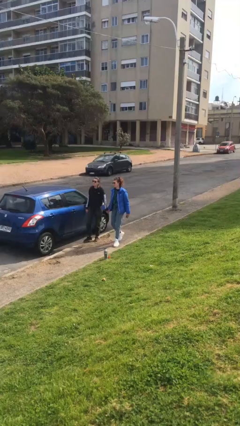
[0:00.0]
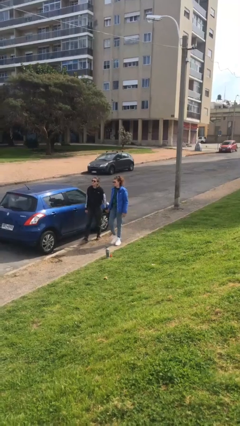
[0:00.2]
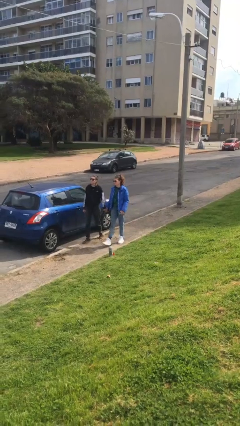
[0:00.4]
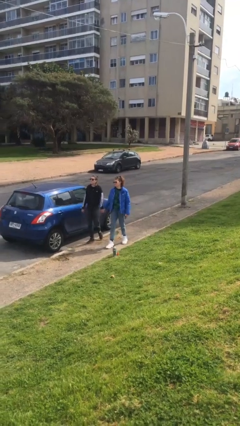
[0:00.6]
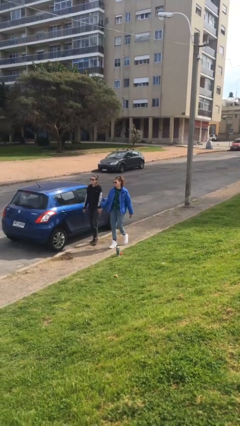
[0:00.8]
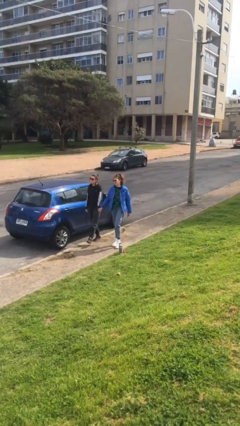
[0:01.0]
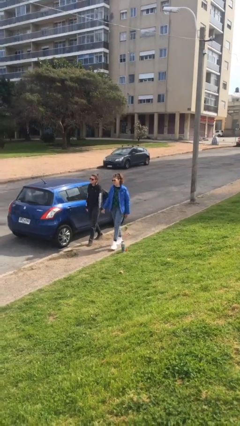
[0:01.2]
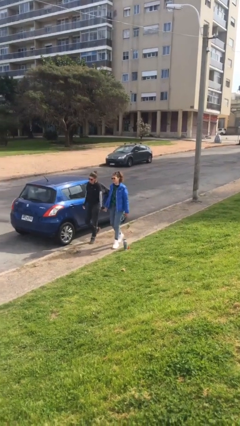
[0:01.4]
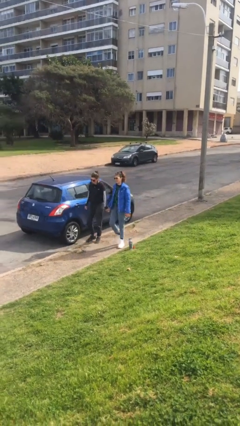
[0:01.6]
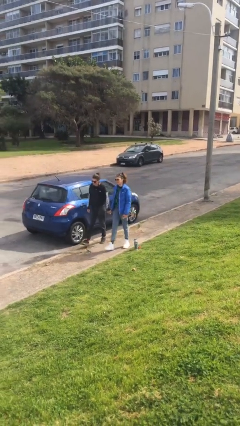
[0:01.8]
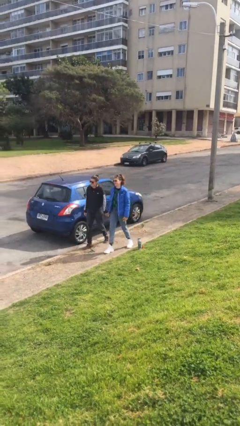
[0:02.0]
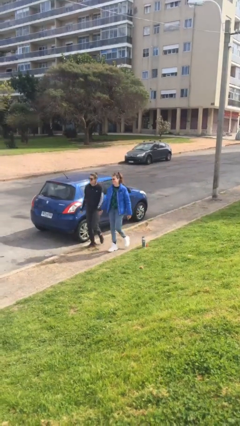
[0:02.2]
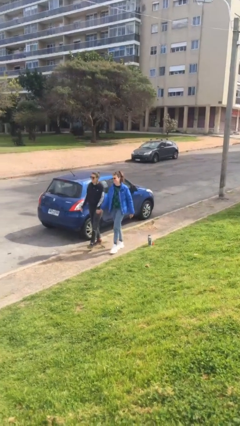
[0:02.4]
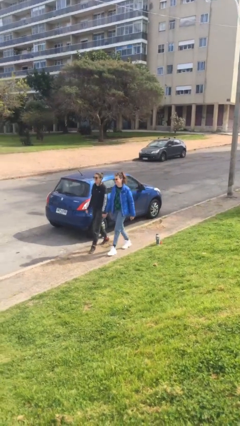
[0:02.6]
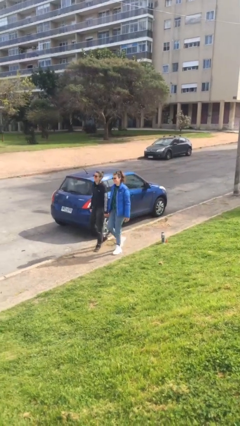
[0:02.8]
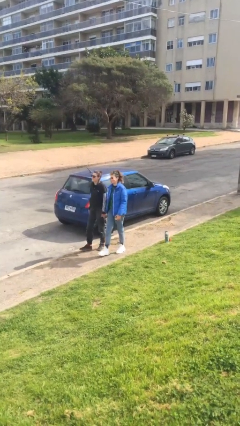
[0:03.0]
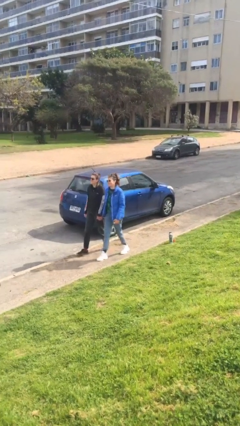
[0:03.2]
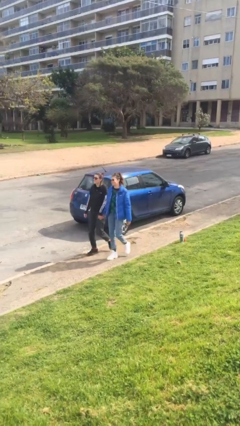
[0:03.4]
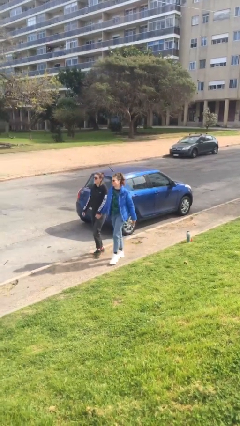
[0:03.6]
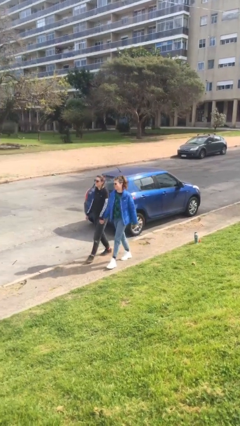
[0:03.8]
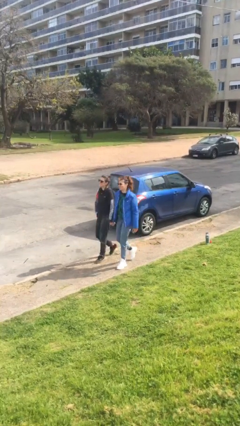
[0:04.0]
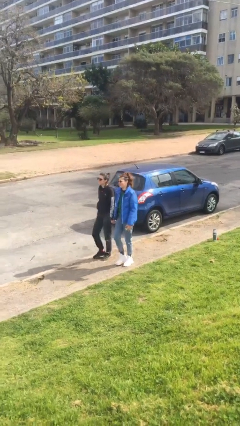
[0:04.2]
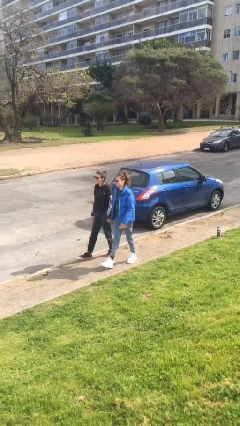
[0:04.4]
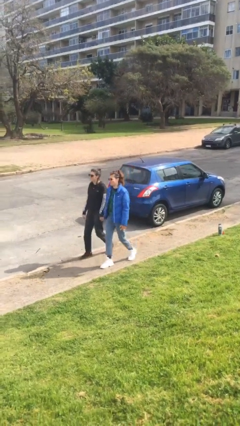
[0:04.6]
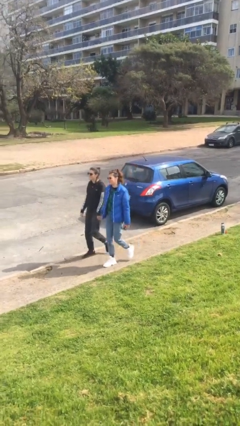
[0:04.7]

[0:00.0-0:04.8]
person holds hand

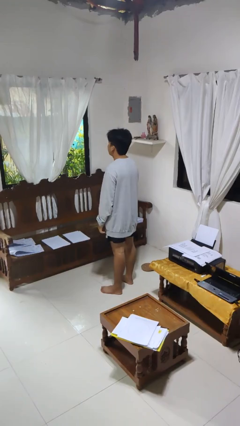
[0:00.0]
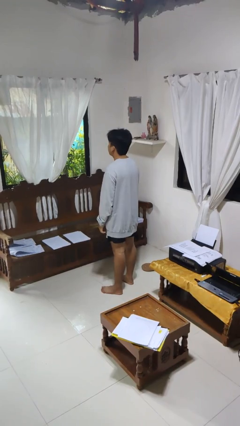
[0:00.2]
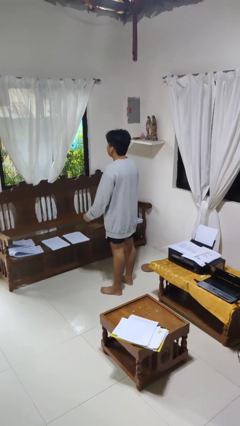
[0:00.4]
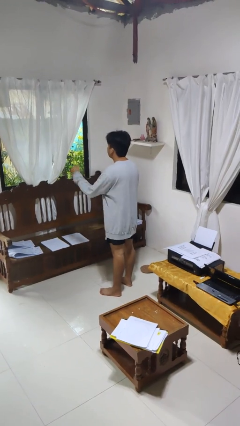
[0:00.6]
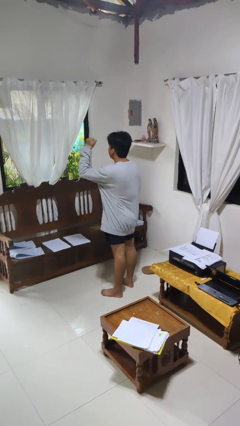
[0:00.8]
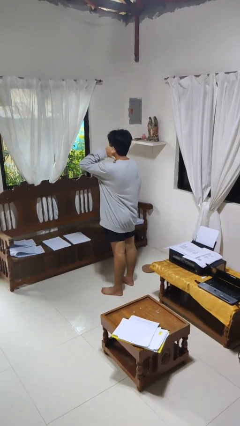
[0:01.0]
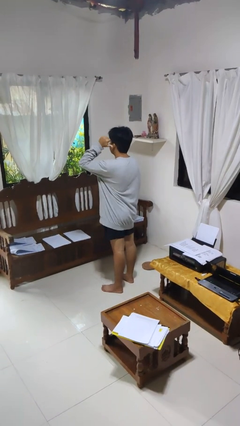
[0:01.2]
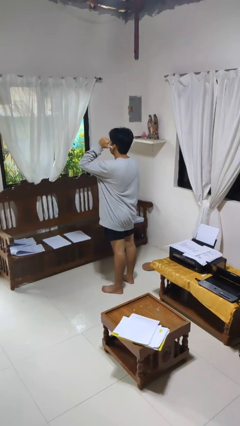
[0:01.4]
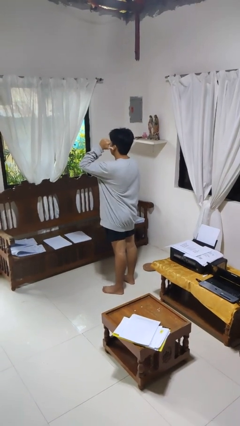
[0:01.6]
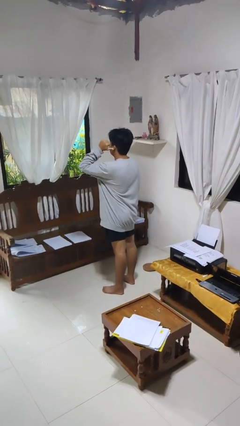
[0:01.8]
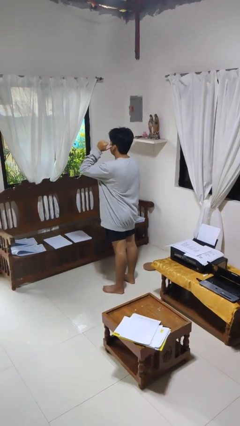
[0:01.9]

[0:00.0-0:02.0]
person gestures behind me

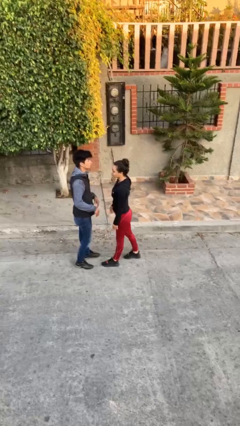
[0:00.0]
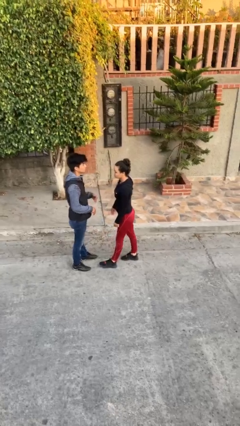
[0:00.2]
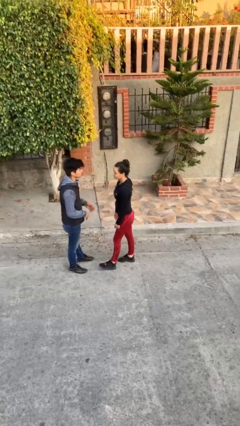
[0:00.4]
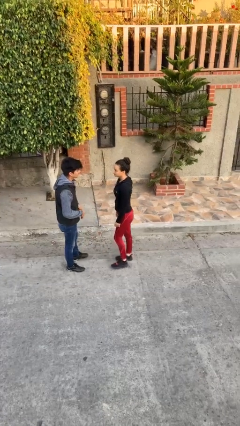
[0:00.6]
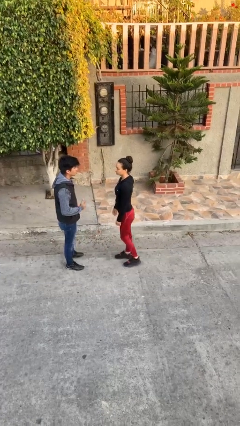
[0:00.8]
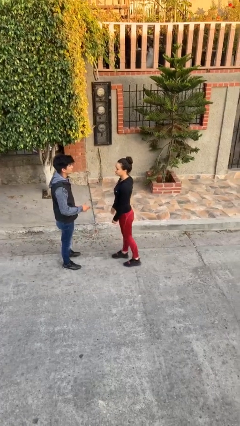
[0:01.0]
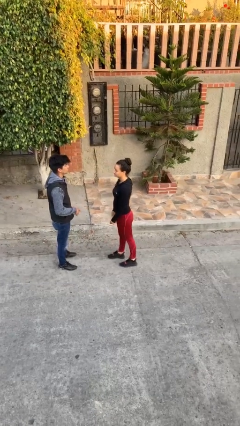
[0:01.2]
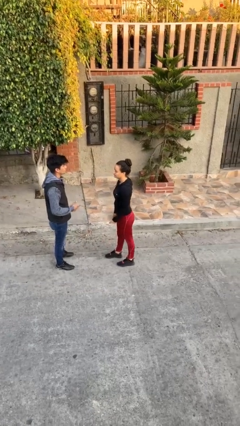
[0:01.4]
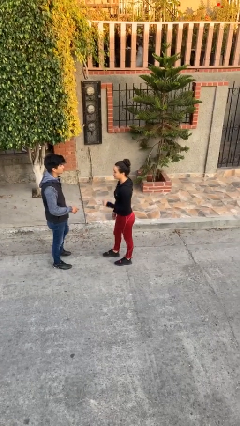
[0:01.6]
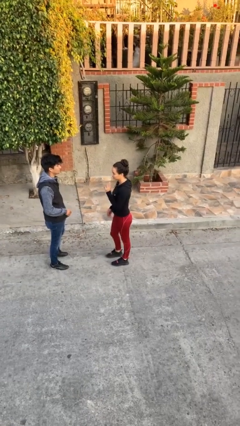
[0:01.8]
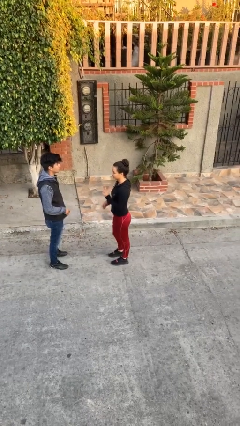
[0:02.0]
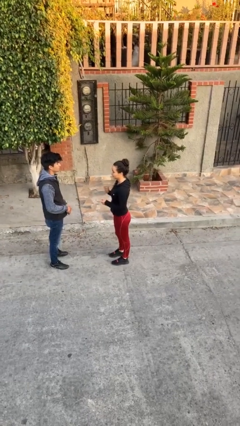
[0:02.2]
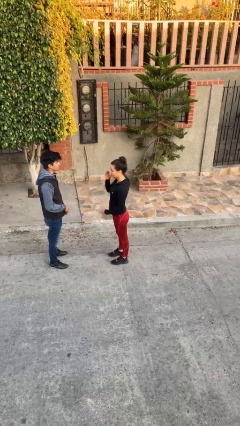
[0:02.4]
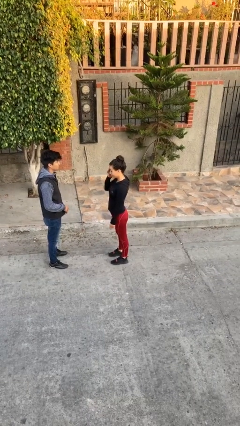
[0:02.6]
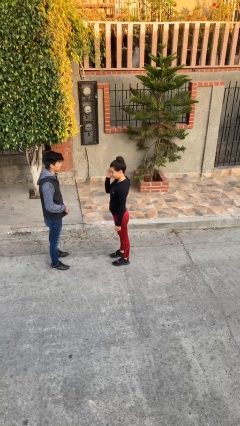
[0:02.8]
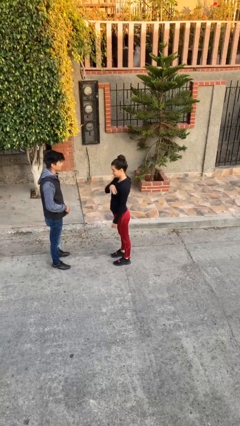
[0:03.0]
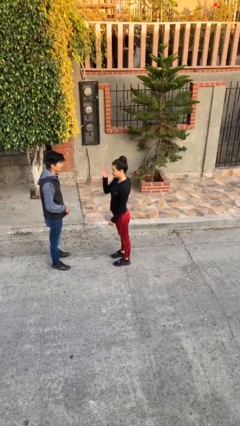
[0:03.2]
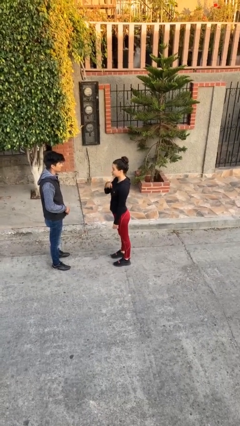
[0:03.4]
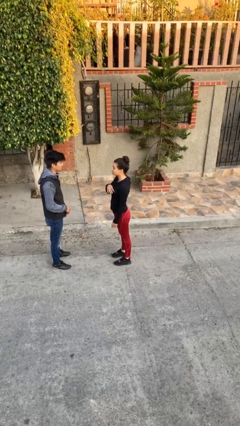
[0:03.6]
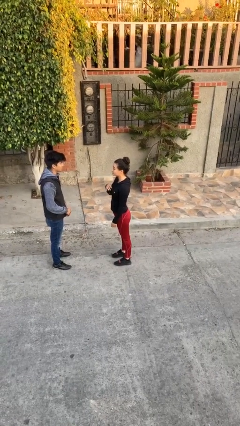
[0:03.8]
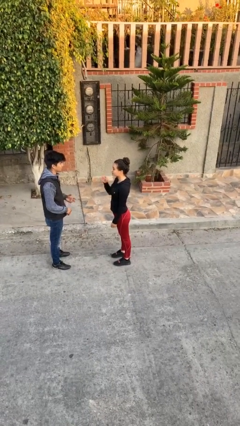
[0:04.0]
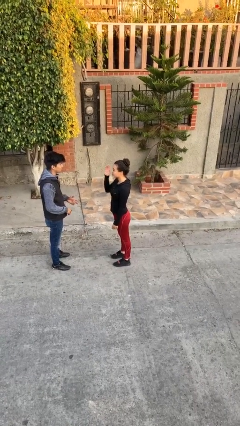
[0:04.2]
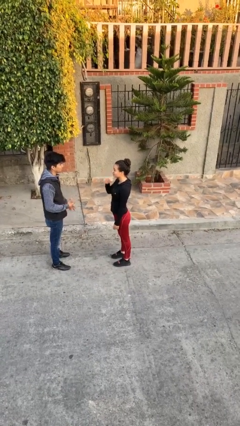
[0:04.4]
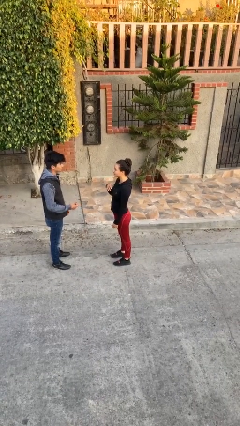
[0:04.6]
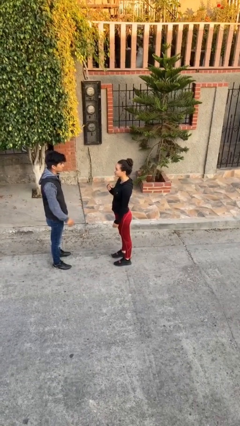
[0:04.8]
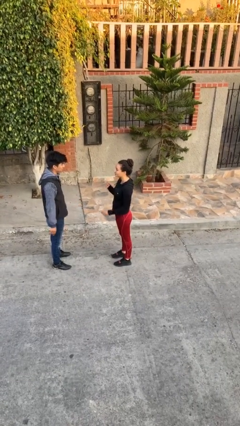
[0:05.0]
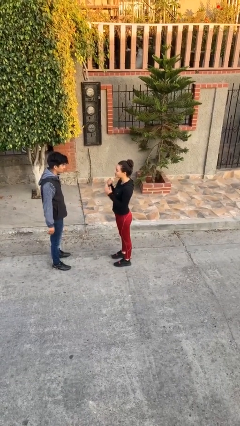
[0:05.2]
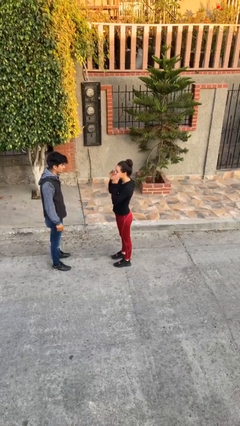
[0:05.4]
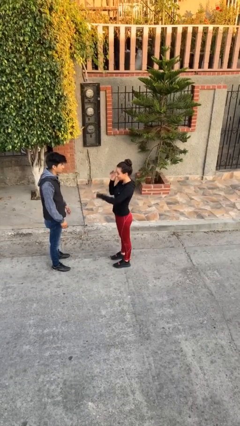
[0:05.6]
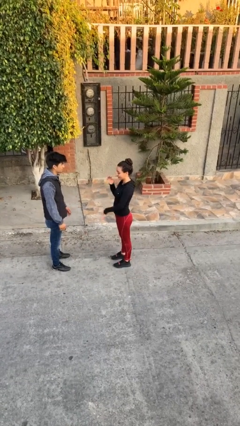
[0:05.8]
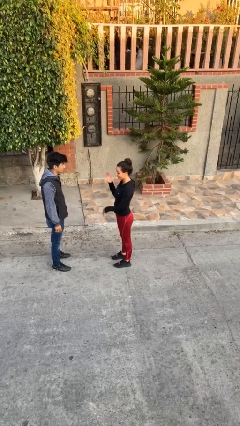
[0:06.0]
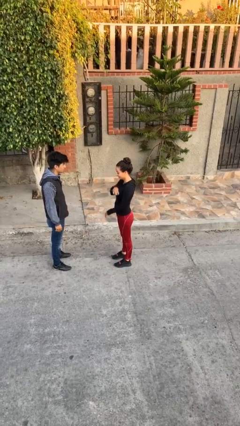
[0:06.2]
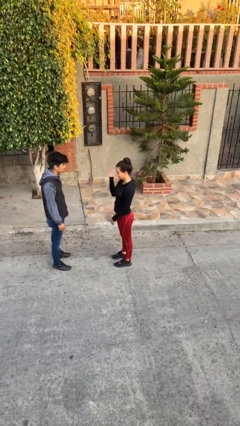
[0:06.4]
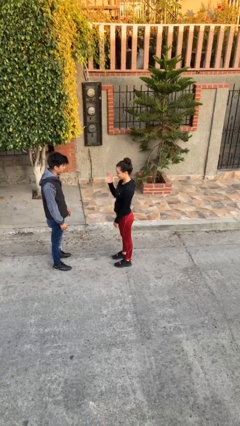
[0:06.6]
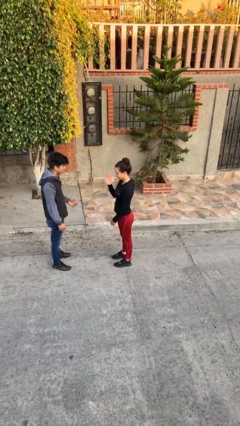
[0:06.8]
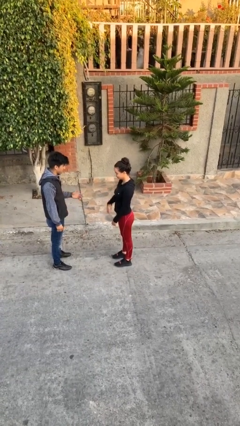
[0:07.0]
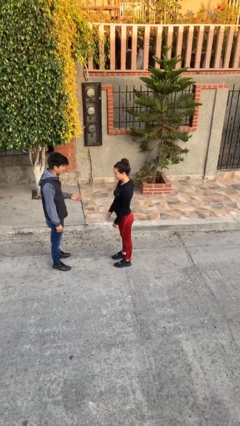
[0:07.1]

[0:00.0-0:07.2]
person talks to person

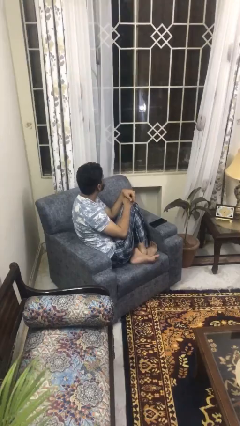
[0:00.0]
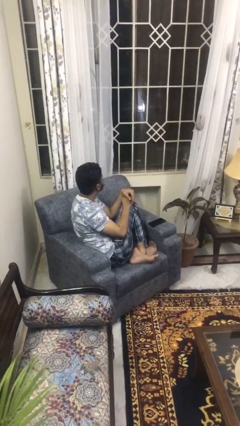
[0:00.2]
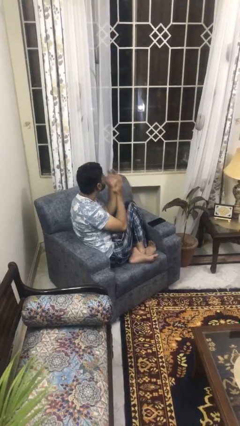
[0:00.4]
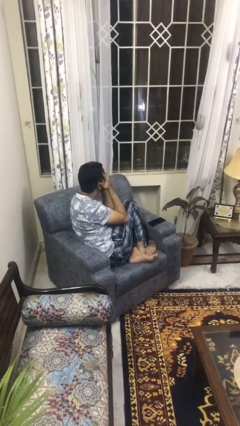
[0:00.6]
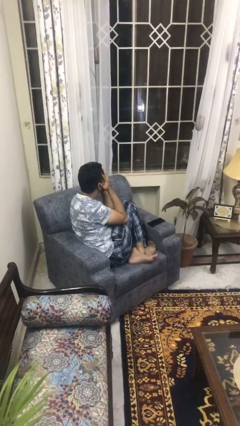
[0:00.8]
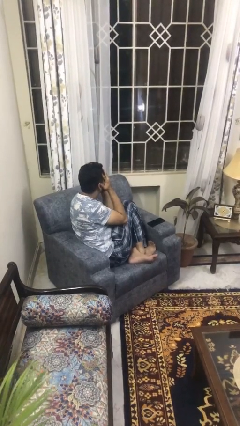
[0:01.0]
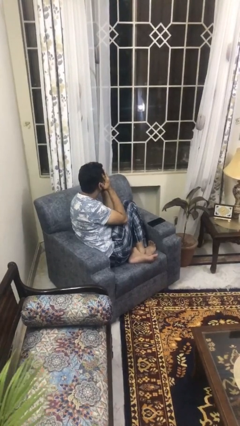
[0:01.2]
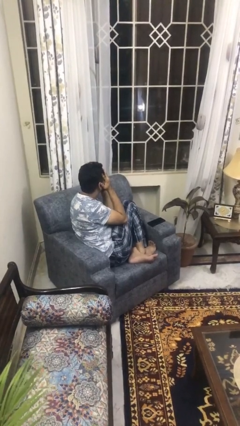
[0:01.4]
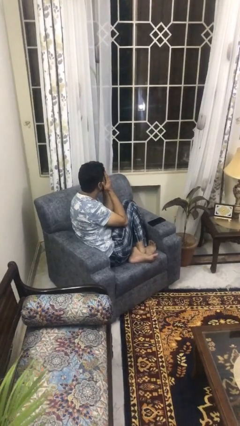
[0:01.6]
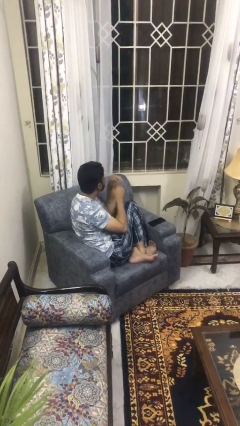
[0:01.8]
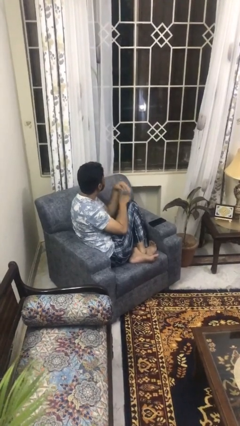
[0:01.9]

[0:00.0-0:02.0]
person covers face with hands

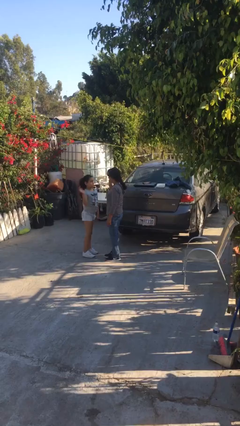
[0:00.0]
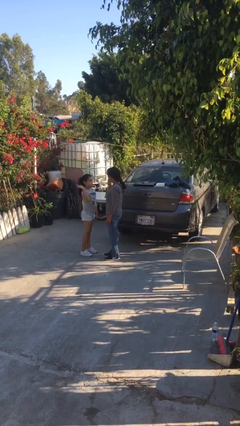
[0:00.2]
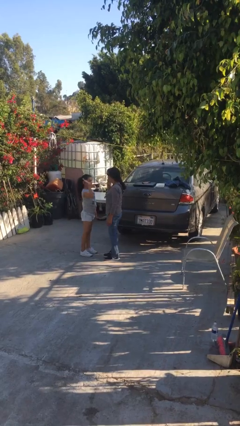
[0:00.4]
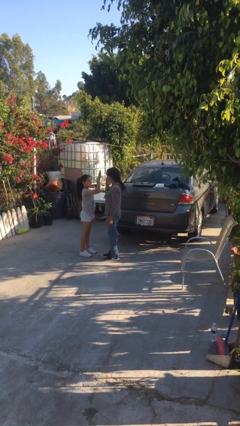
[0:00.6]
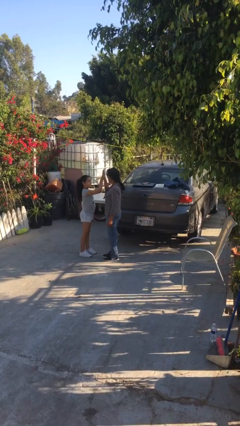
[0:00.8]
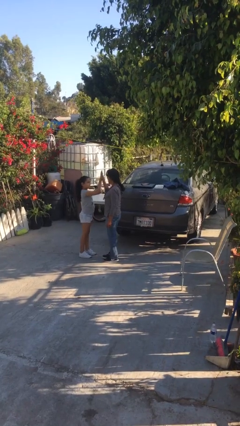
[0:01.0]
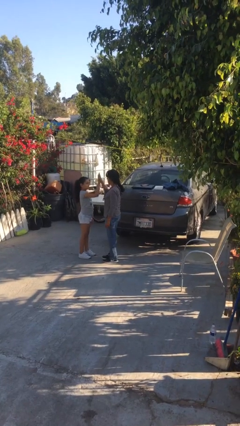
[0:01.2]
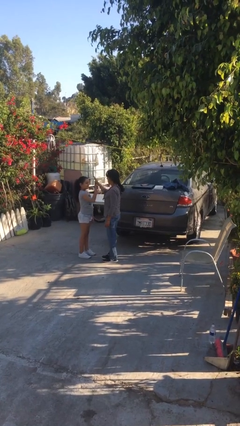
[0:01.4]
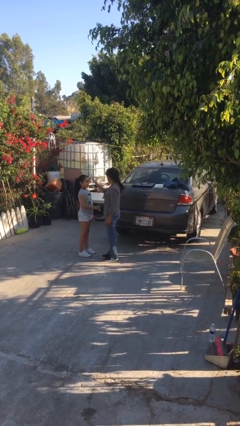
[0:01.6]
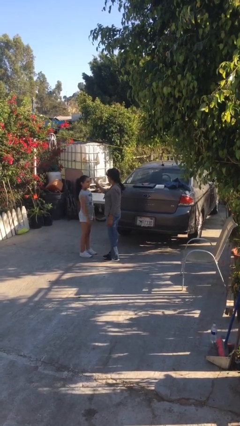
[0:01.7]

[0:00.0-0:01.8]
person highfives hand
